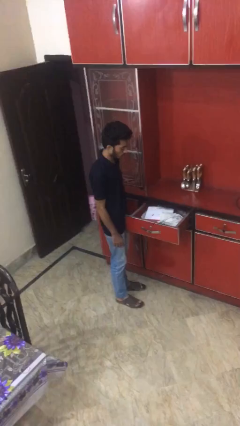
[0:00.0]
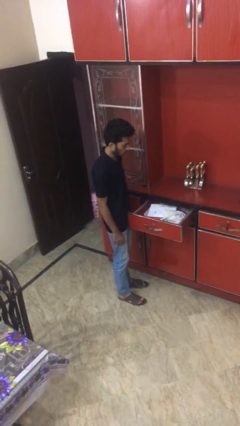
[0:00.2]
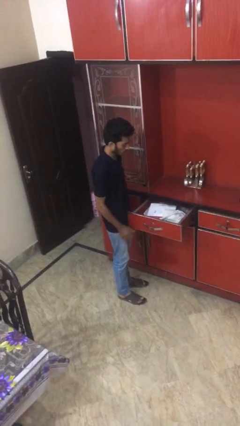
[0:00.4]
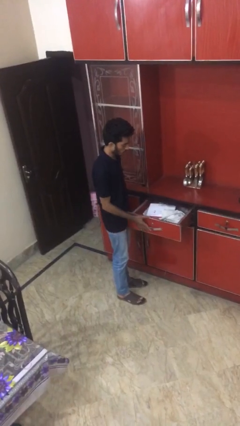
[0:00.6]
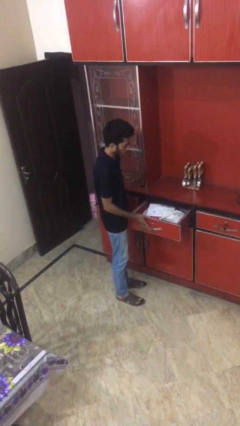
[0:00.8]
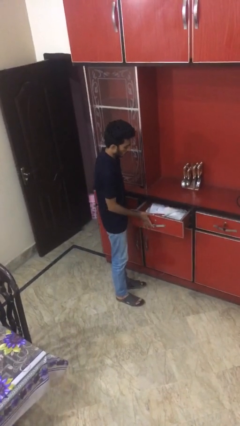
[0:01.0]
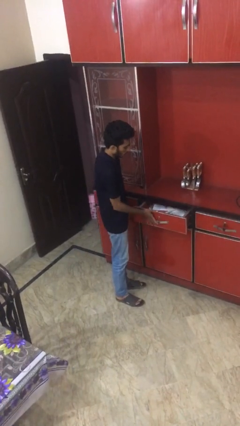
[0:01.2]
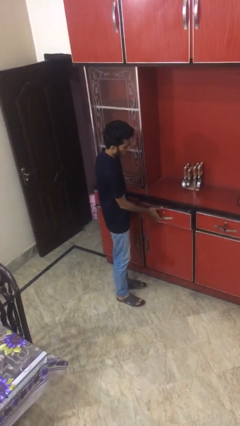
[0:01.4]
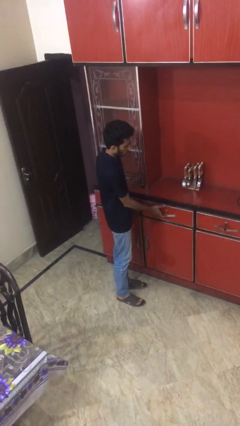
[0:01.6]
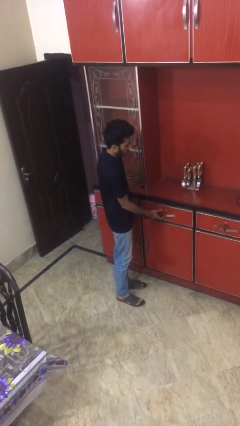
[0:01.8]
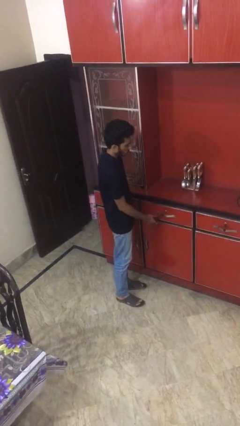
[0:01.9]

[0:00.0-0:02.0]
person closes kitchen drawer

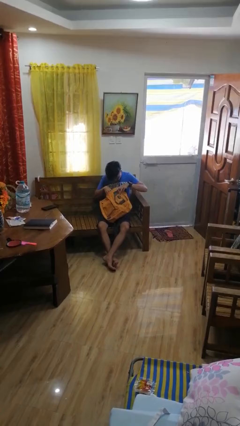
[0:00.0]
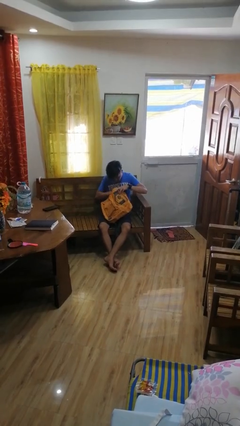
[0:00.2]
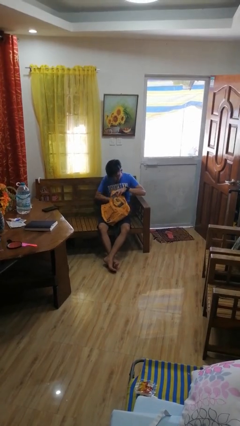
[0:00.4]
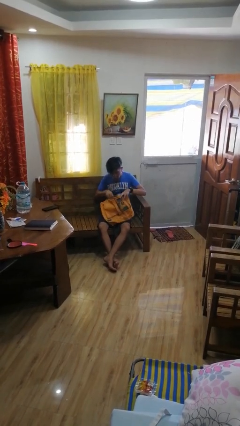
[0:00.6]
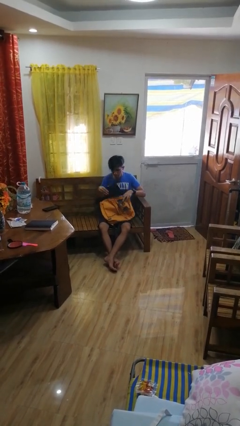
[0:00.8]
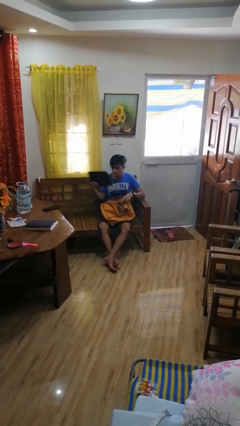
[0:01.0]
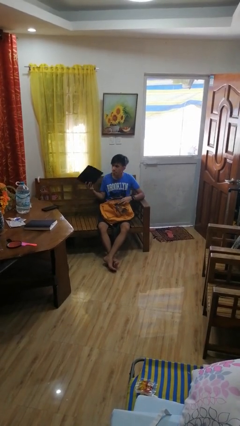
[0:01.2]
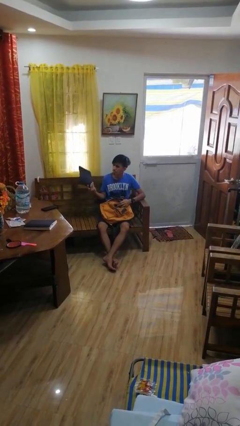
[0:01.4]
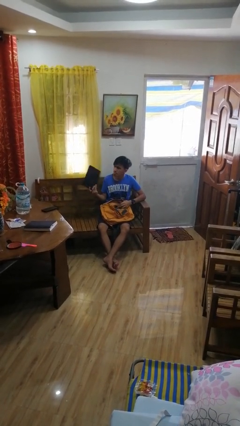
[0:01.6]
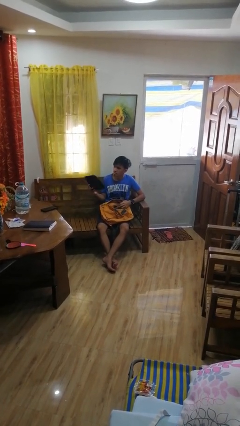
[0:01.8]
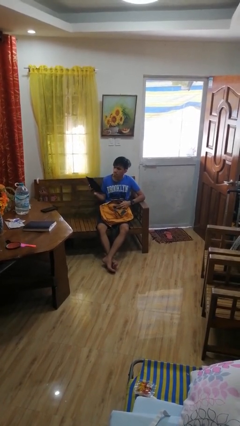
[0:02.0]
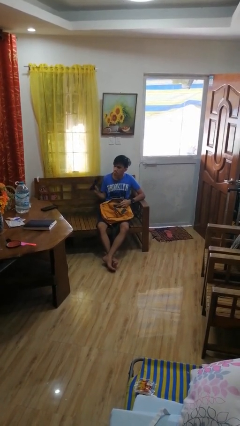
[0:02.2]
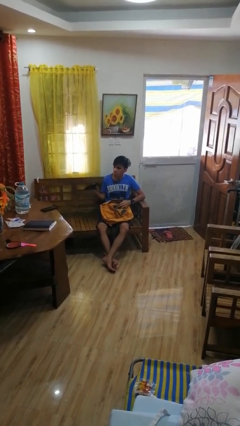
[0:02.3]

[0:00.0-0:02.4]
person takes object from backpack

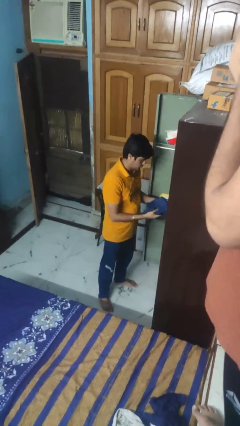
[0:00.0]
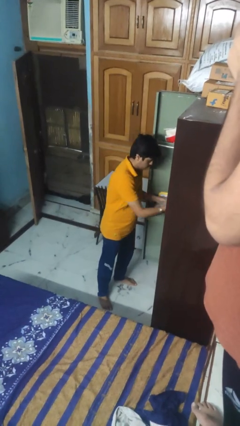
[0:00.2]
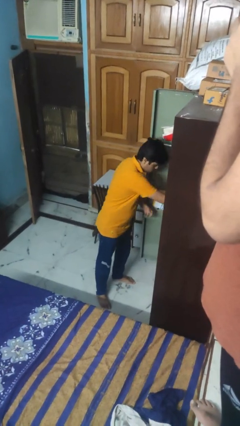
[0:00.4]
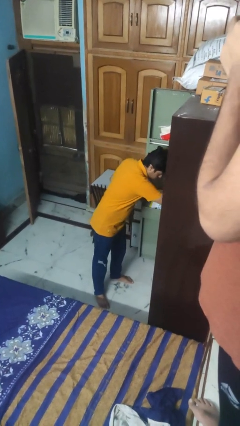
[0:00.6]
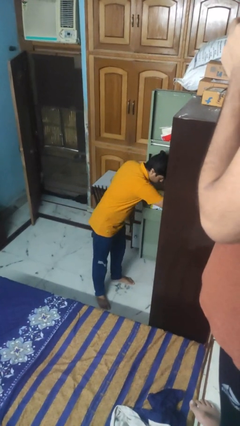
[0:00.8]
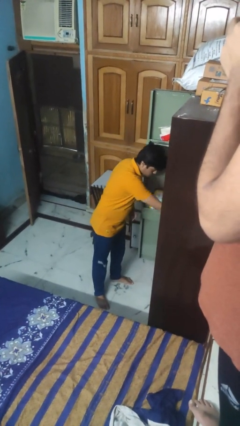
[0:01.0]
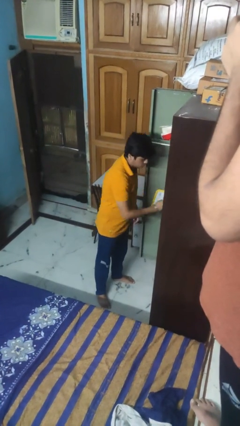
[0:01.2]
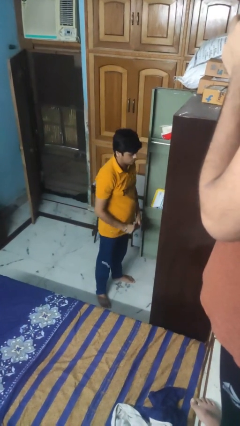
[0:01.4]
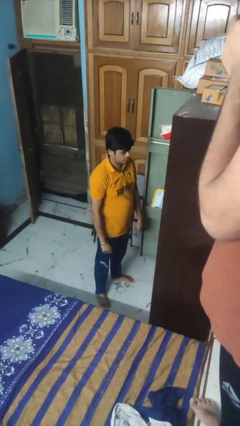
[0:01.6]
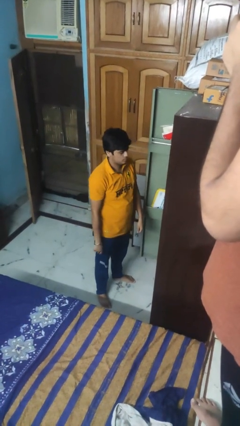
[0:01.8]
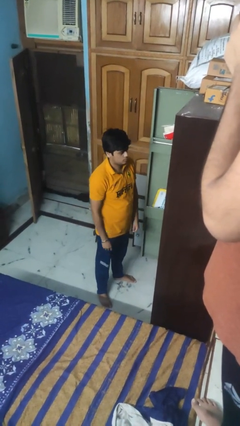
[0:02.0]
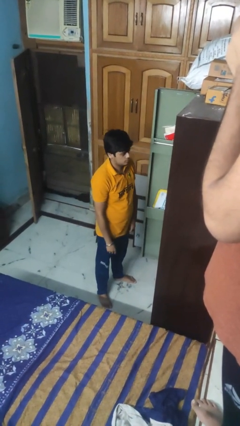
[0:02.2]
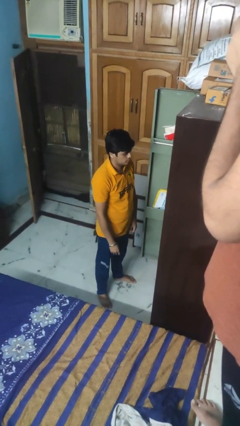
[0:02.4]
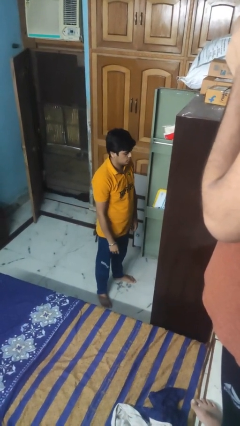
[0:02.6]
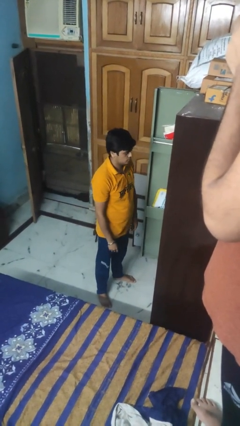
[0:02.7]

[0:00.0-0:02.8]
person puts clothes into dresser

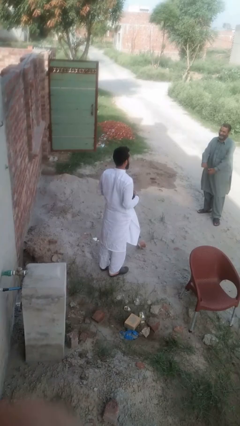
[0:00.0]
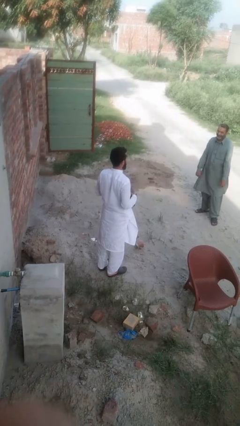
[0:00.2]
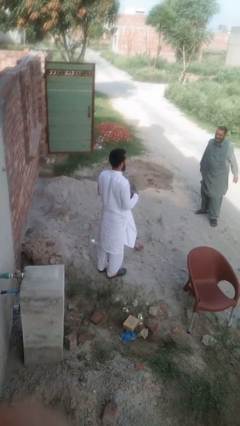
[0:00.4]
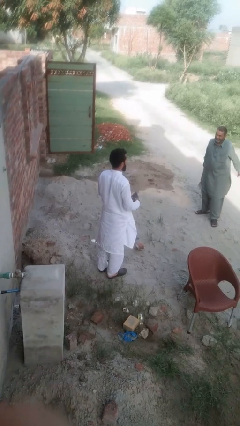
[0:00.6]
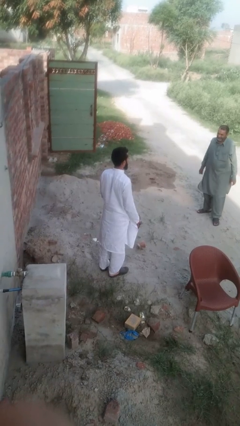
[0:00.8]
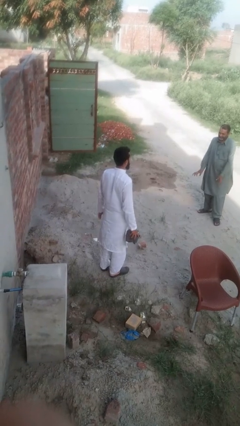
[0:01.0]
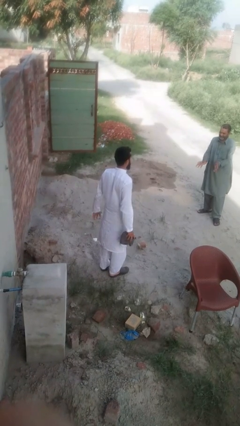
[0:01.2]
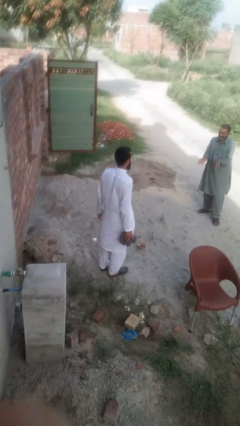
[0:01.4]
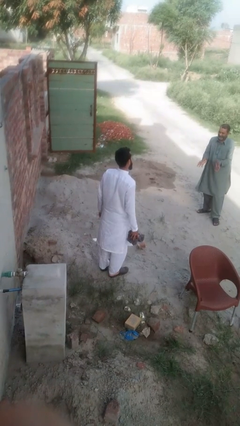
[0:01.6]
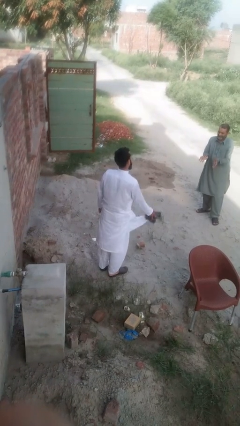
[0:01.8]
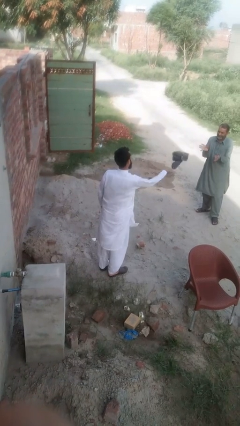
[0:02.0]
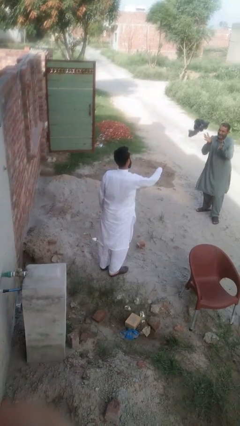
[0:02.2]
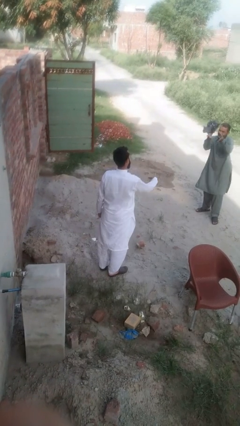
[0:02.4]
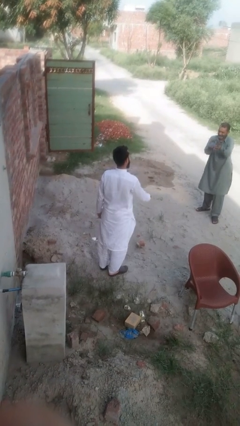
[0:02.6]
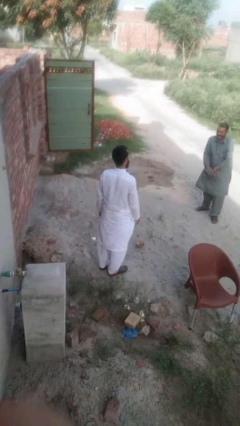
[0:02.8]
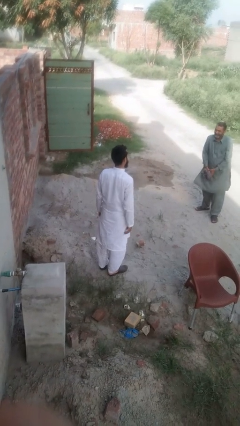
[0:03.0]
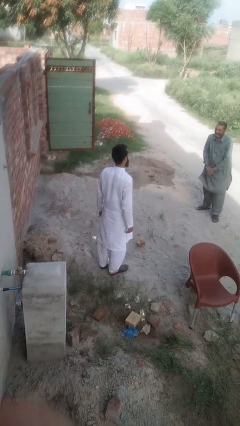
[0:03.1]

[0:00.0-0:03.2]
person throws object to person

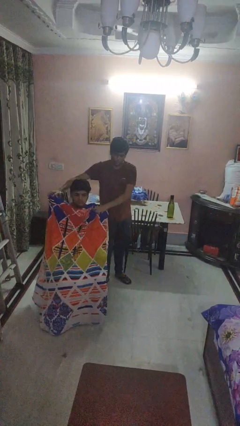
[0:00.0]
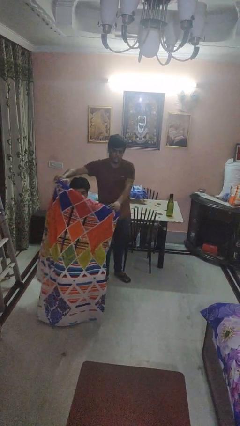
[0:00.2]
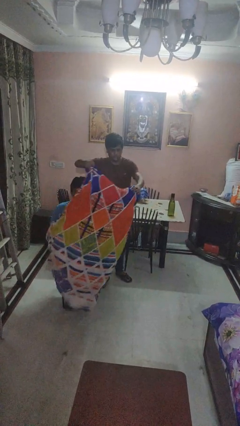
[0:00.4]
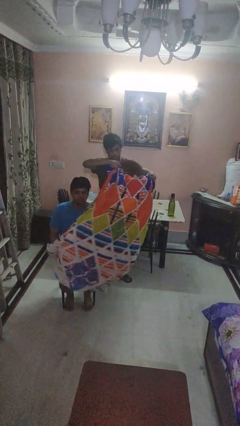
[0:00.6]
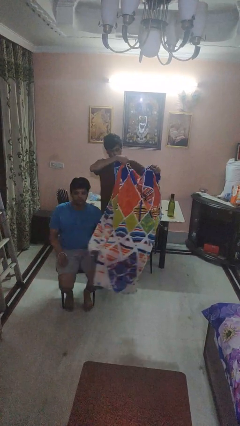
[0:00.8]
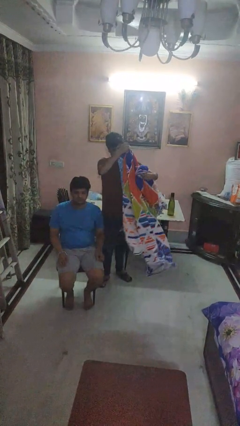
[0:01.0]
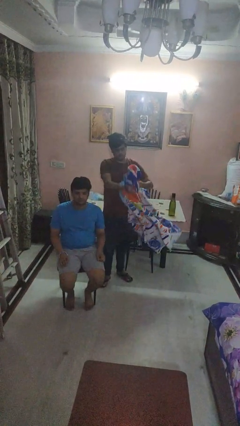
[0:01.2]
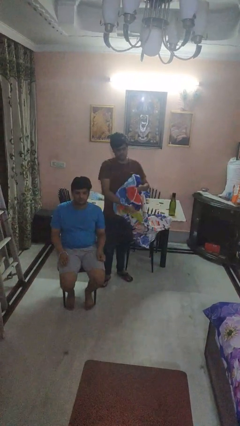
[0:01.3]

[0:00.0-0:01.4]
person uncovers friend with blanket

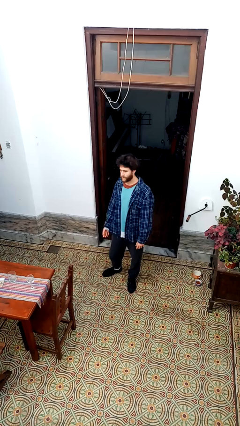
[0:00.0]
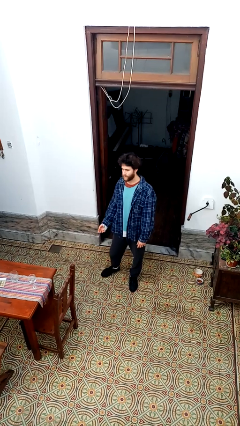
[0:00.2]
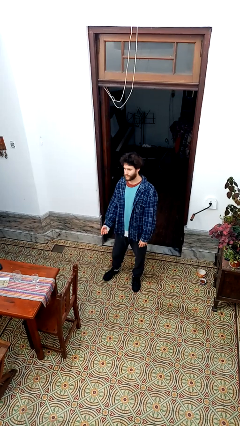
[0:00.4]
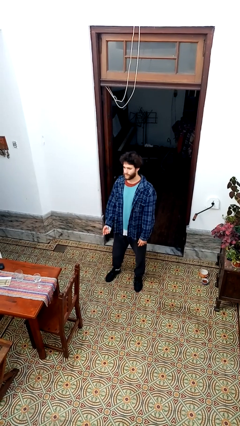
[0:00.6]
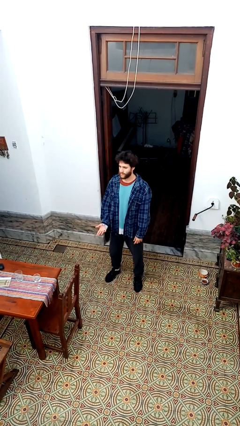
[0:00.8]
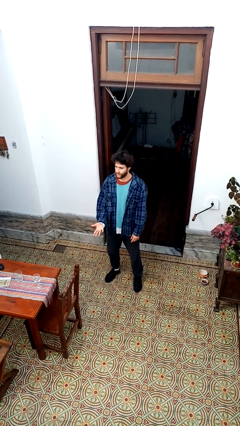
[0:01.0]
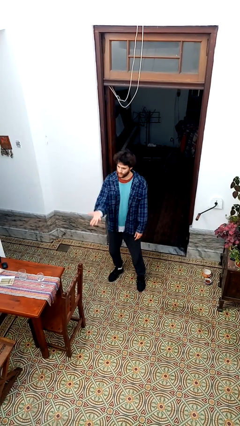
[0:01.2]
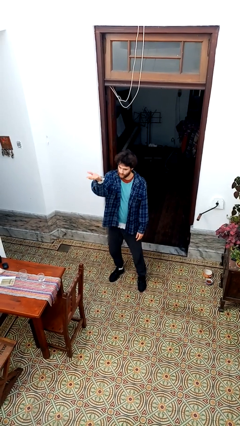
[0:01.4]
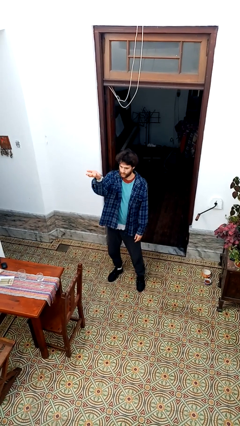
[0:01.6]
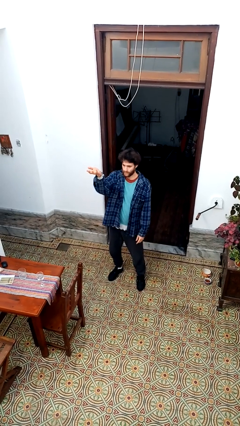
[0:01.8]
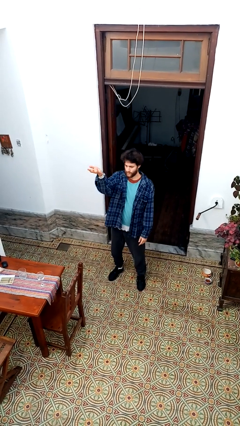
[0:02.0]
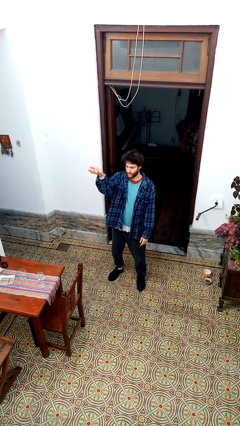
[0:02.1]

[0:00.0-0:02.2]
person gestures swipe up

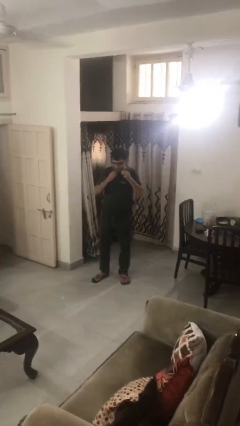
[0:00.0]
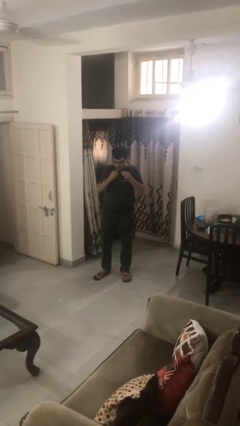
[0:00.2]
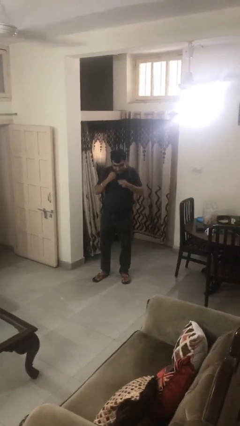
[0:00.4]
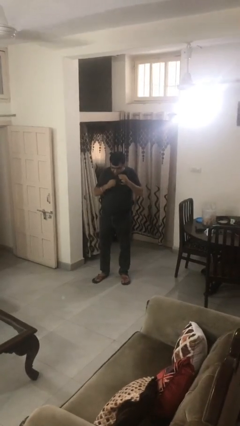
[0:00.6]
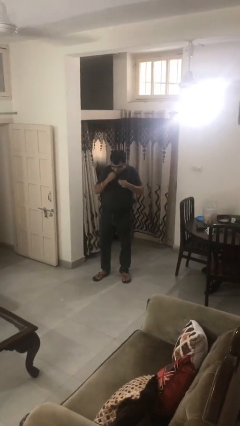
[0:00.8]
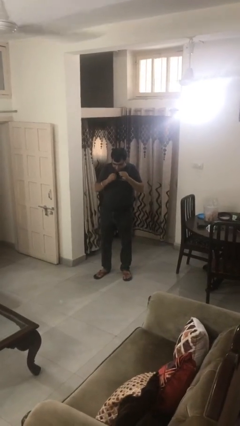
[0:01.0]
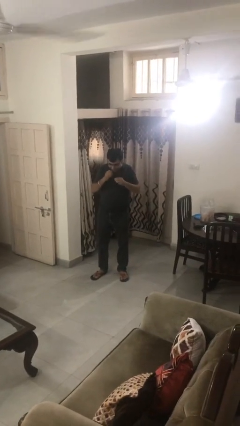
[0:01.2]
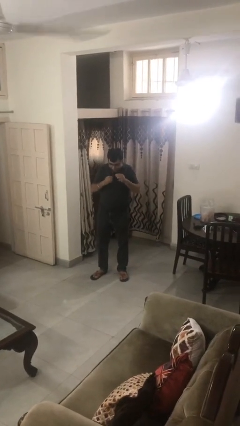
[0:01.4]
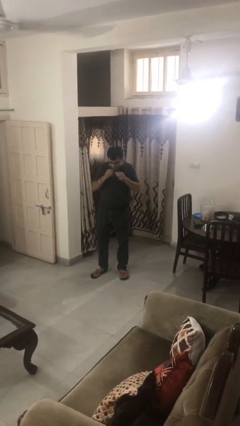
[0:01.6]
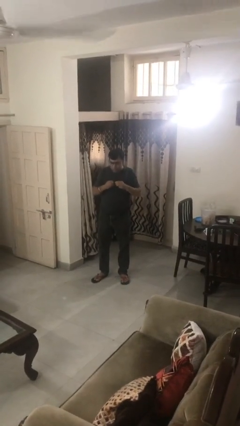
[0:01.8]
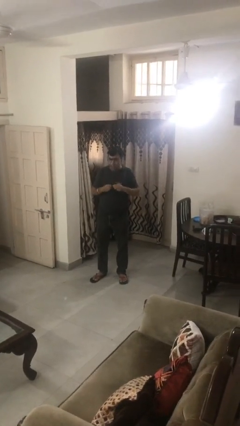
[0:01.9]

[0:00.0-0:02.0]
person flosses

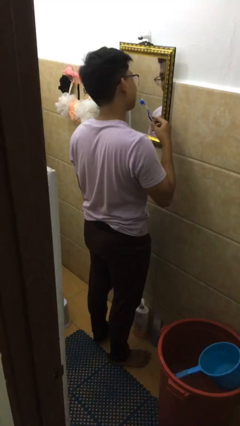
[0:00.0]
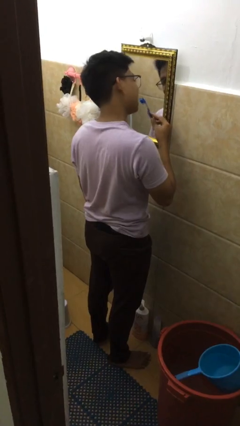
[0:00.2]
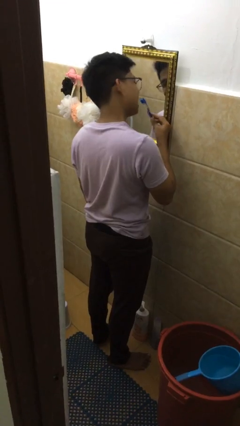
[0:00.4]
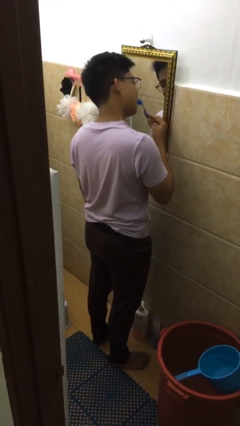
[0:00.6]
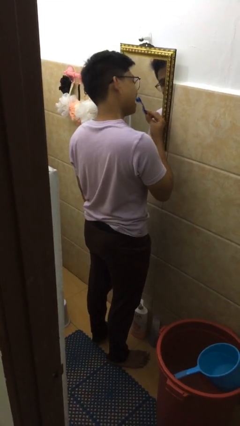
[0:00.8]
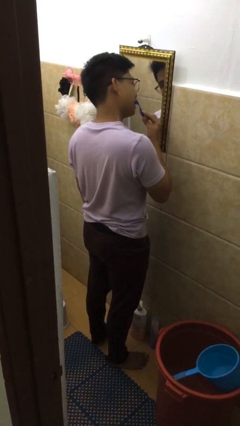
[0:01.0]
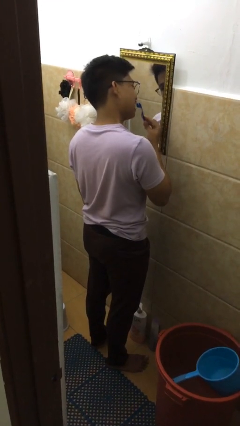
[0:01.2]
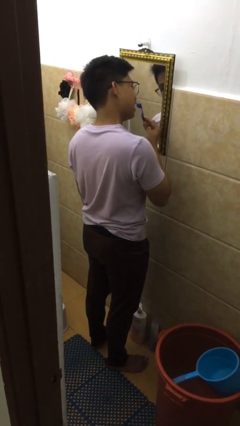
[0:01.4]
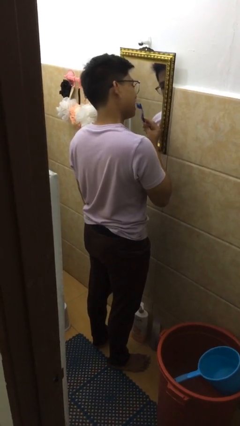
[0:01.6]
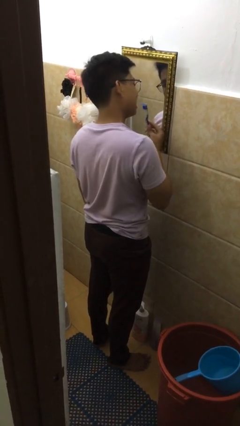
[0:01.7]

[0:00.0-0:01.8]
person brushes teeth
